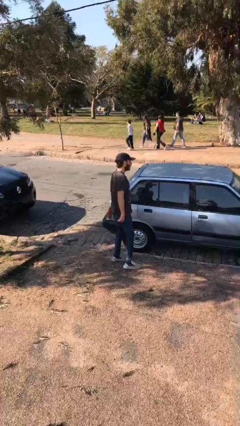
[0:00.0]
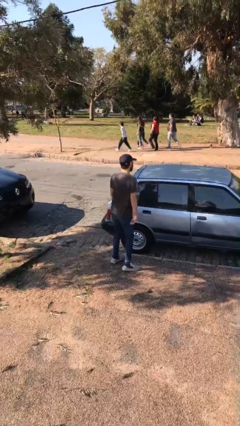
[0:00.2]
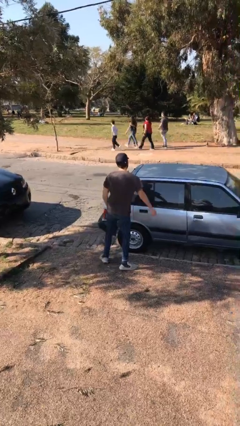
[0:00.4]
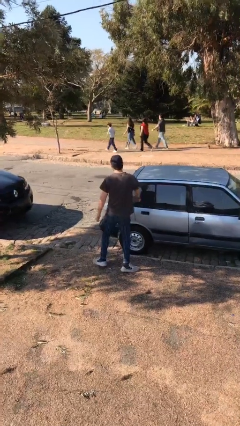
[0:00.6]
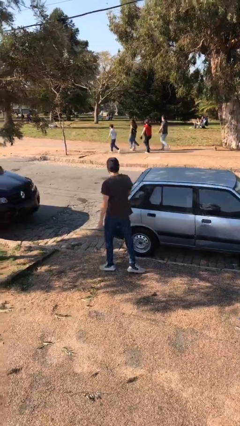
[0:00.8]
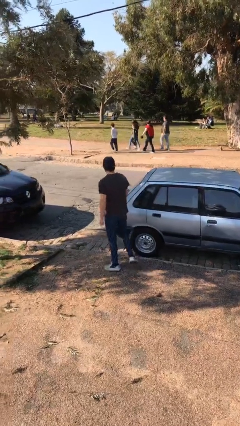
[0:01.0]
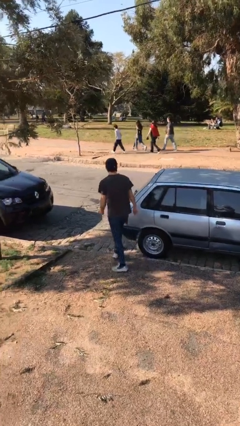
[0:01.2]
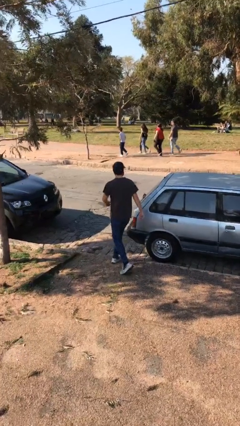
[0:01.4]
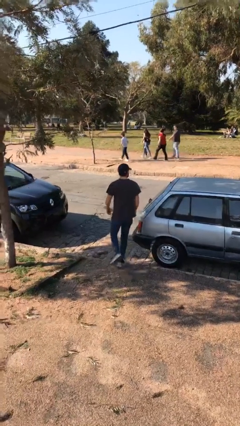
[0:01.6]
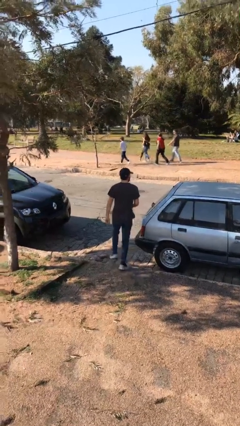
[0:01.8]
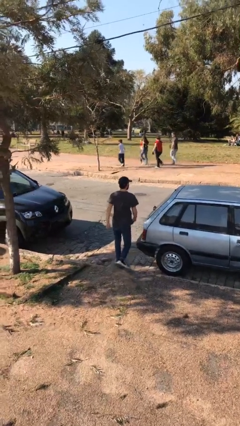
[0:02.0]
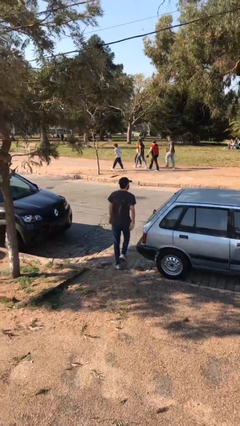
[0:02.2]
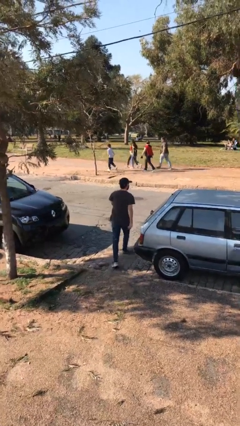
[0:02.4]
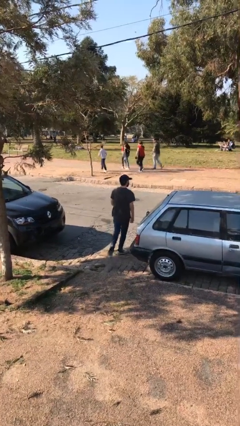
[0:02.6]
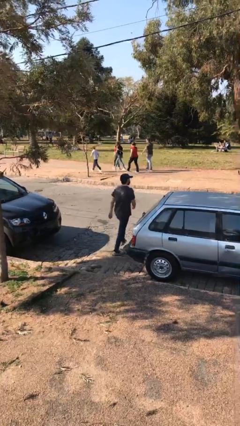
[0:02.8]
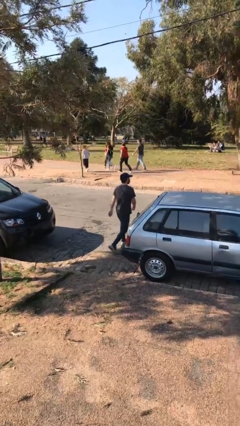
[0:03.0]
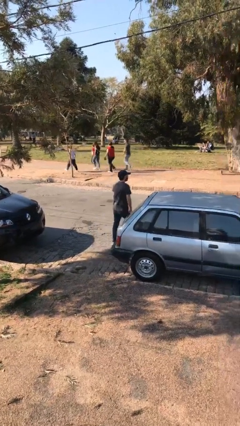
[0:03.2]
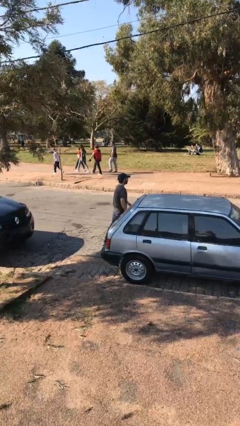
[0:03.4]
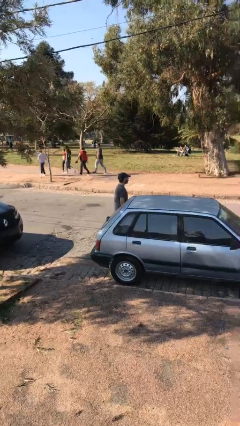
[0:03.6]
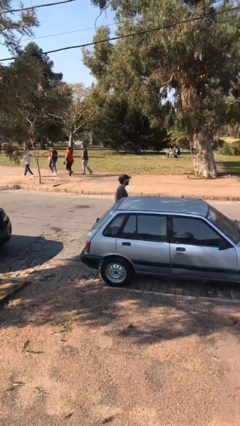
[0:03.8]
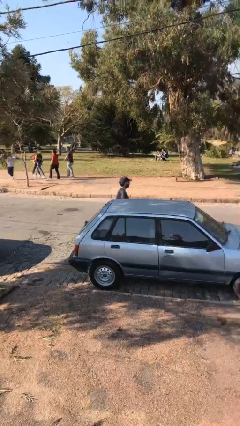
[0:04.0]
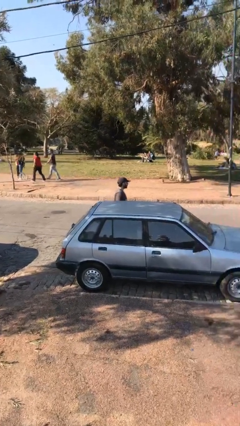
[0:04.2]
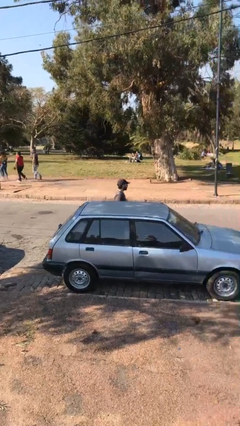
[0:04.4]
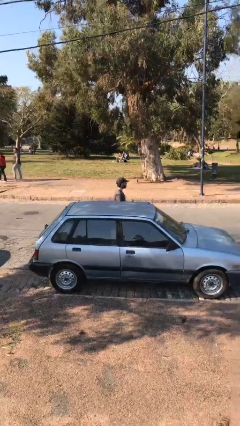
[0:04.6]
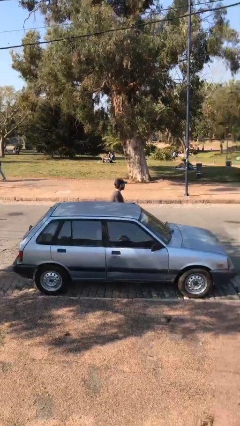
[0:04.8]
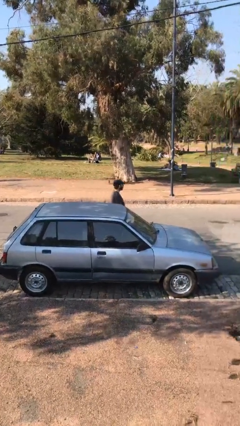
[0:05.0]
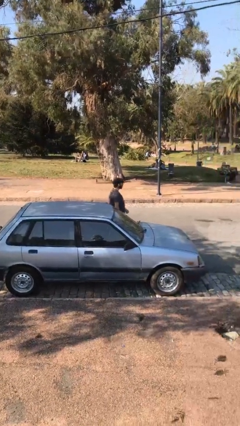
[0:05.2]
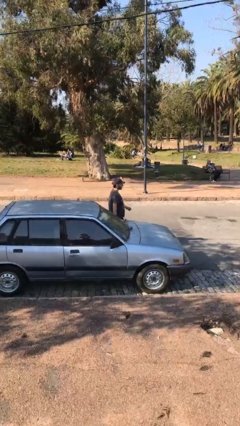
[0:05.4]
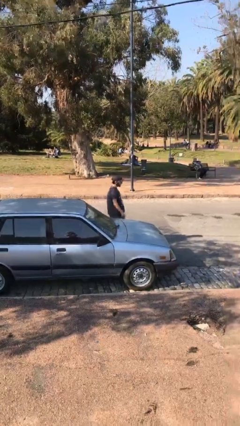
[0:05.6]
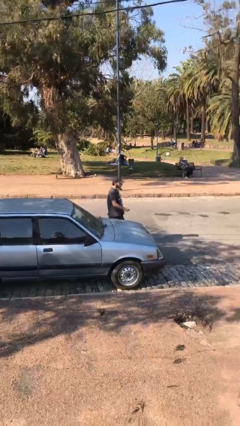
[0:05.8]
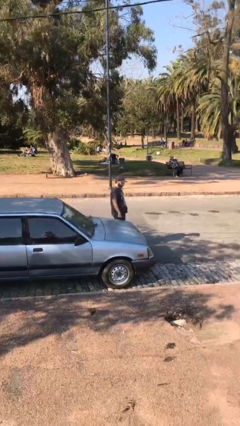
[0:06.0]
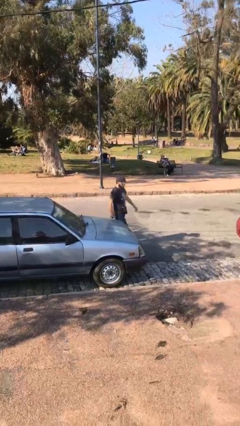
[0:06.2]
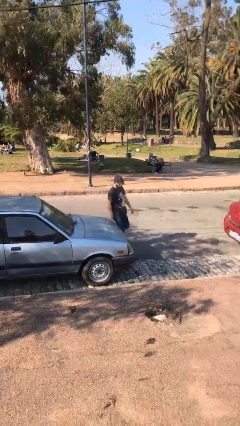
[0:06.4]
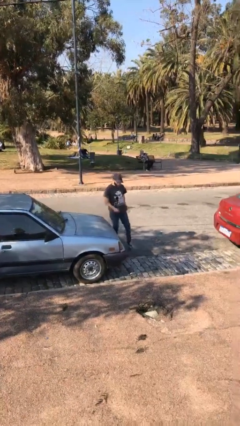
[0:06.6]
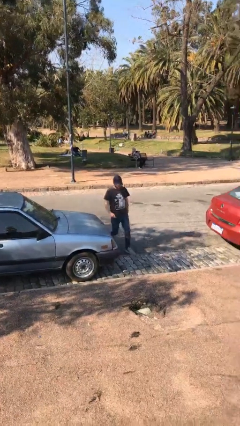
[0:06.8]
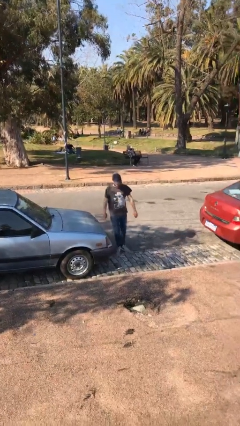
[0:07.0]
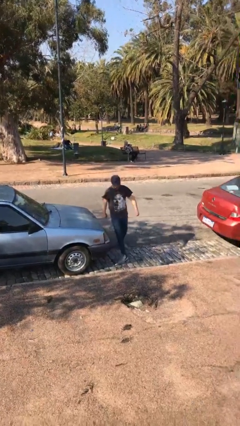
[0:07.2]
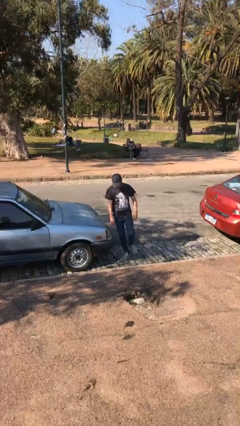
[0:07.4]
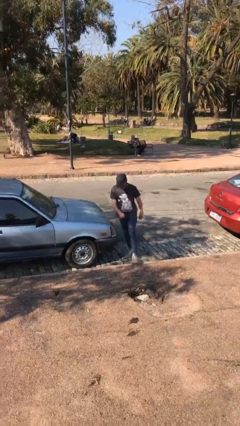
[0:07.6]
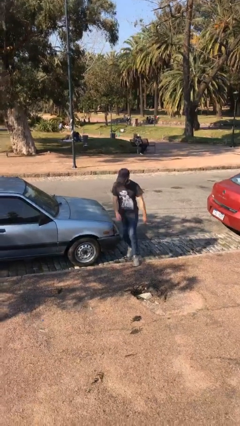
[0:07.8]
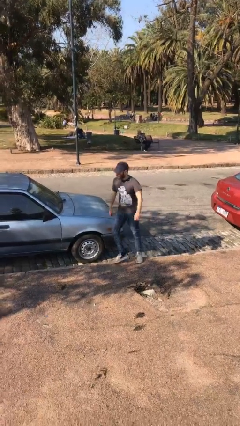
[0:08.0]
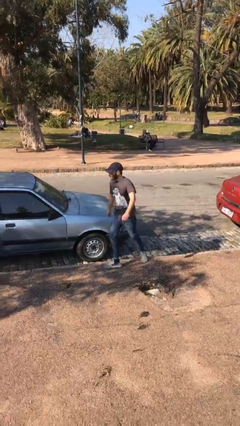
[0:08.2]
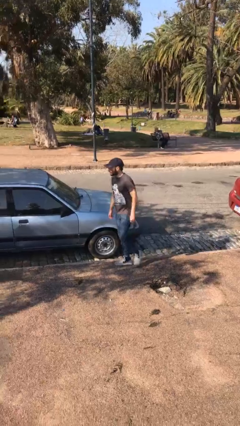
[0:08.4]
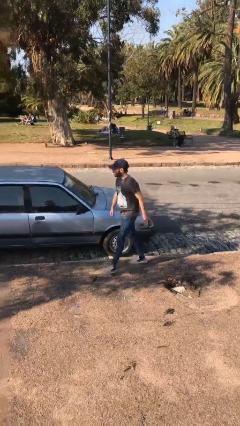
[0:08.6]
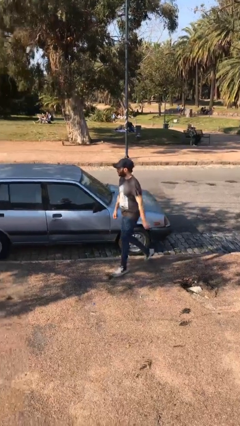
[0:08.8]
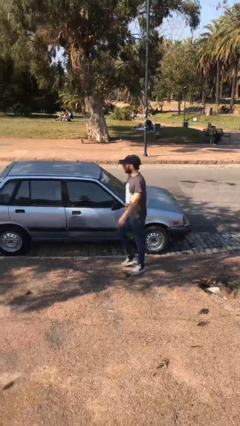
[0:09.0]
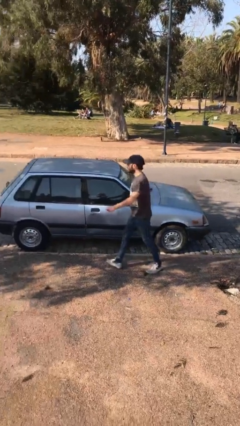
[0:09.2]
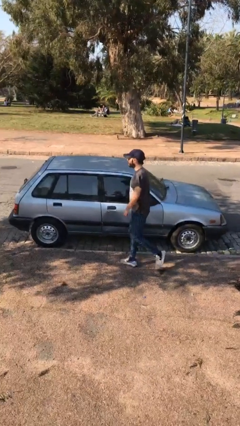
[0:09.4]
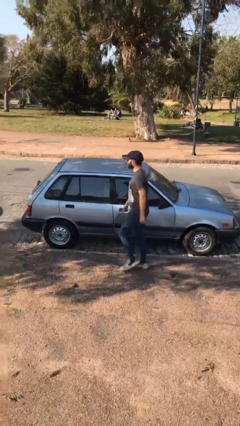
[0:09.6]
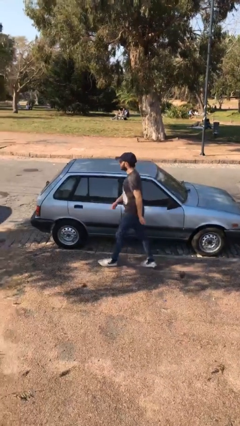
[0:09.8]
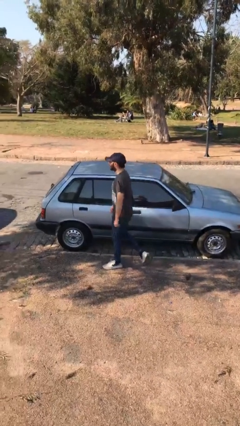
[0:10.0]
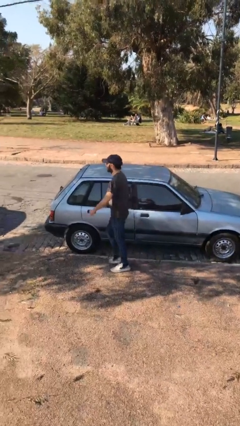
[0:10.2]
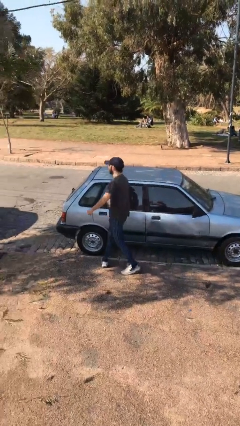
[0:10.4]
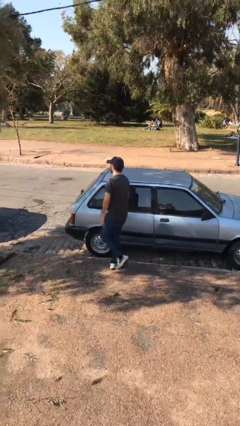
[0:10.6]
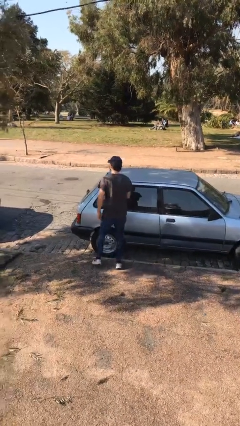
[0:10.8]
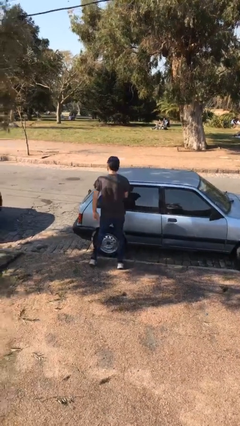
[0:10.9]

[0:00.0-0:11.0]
person walks around car

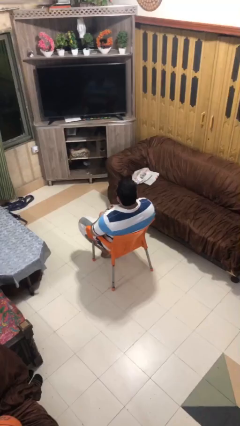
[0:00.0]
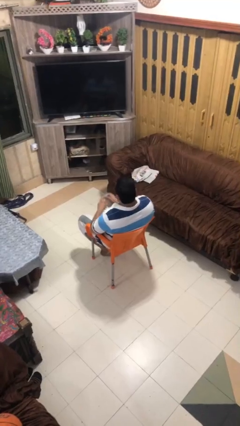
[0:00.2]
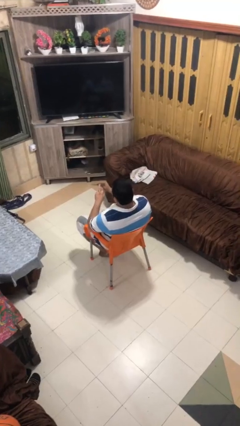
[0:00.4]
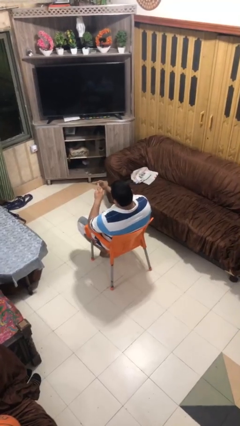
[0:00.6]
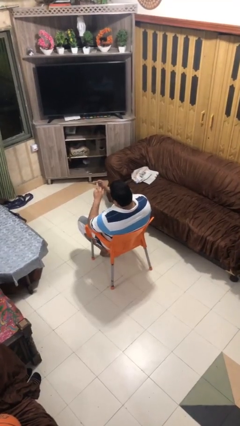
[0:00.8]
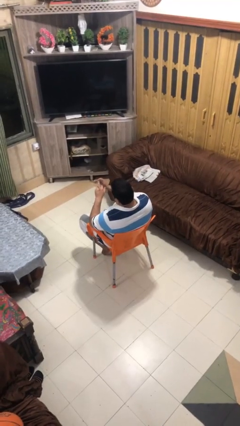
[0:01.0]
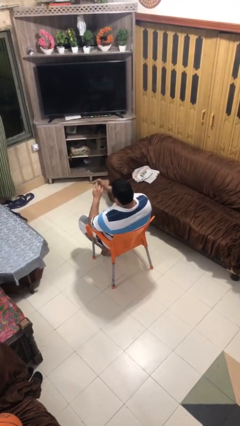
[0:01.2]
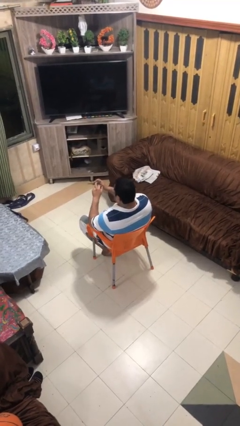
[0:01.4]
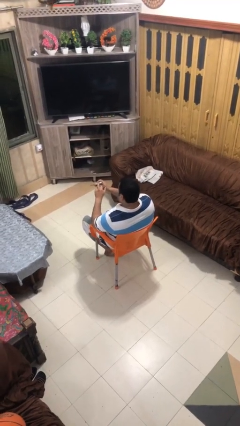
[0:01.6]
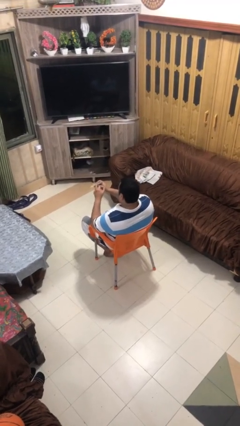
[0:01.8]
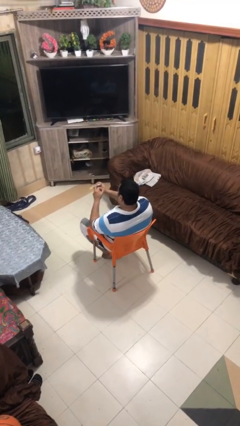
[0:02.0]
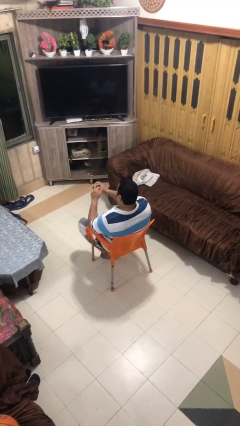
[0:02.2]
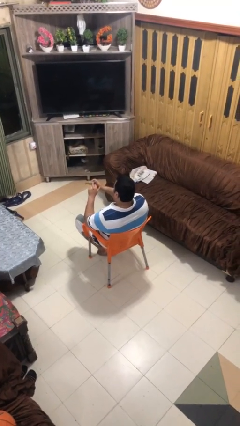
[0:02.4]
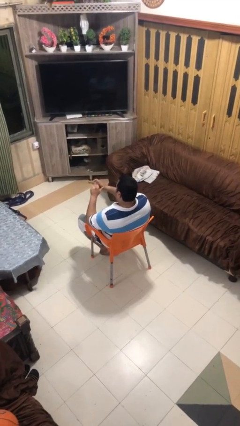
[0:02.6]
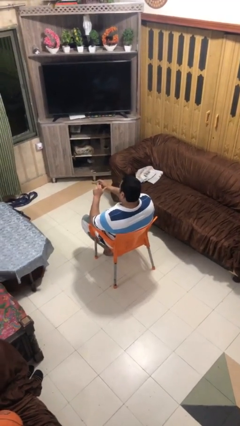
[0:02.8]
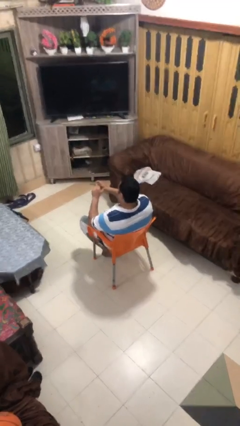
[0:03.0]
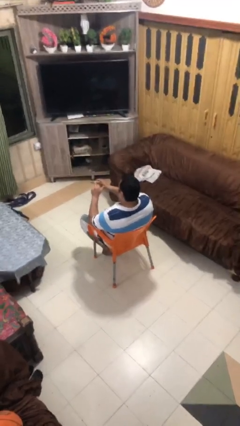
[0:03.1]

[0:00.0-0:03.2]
person files fingernails

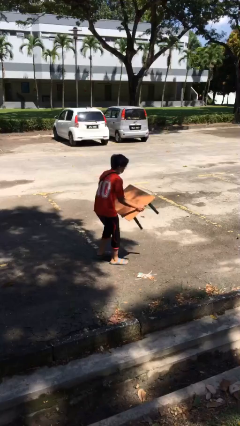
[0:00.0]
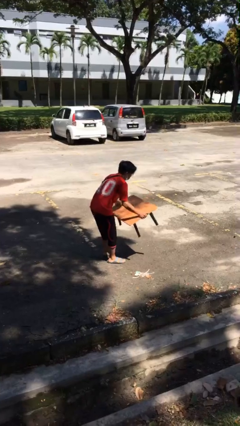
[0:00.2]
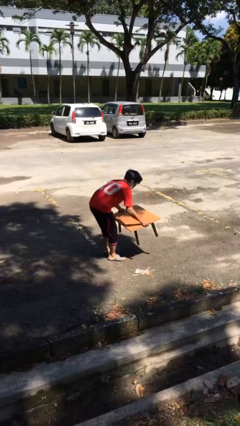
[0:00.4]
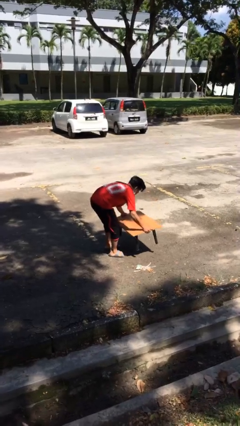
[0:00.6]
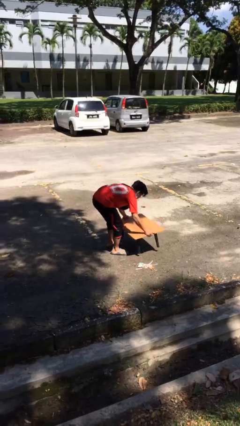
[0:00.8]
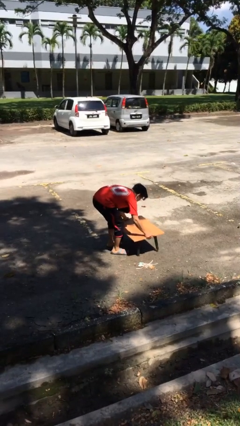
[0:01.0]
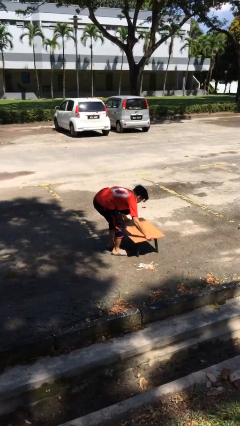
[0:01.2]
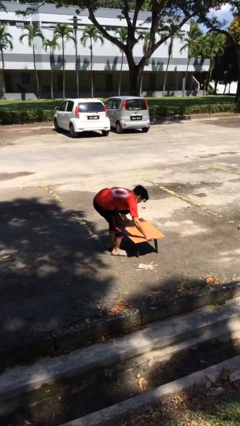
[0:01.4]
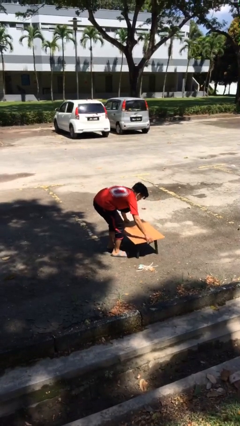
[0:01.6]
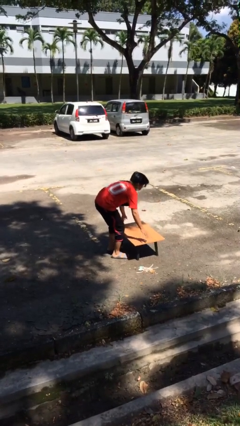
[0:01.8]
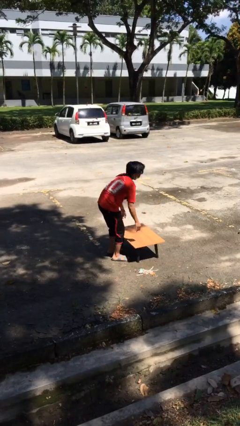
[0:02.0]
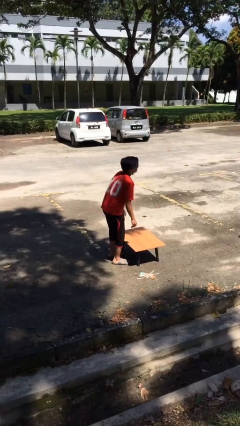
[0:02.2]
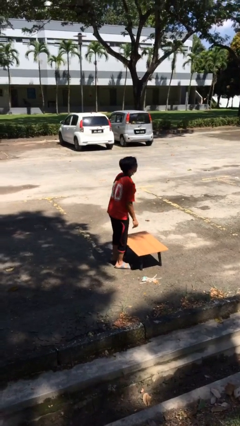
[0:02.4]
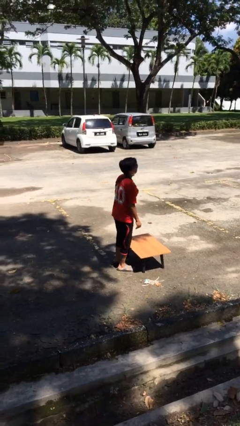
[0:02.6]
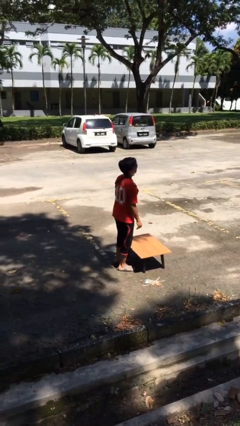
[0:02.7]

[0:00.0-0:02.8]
person puts down object on floor

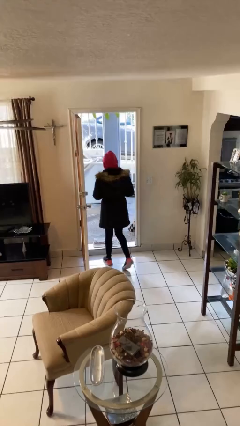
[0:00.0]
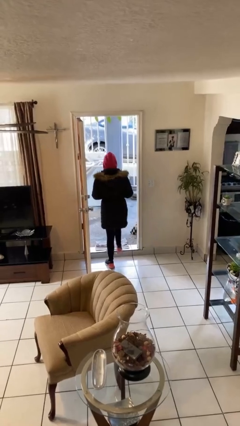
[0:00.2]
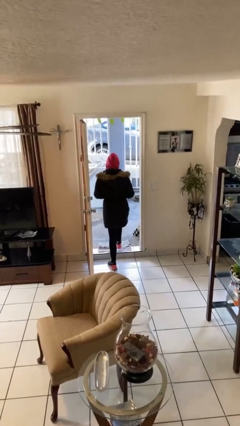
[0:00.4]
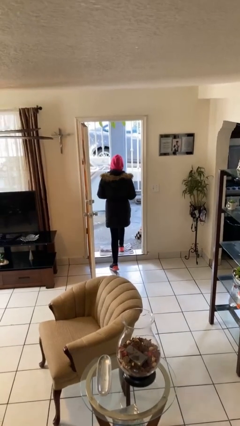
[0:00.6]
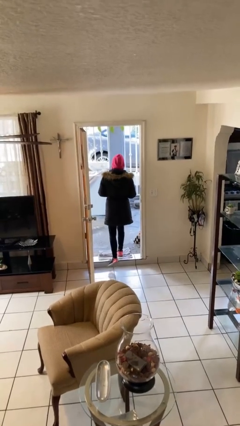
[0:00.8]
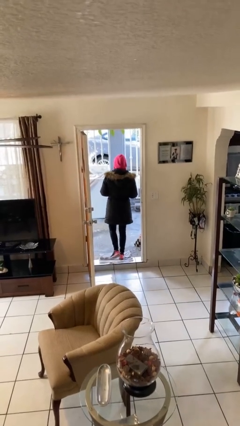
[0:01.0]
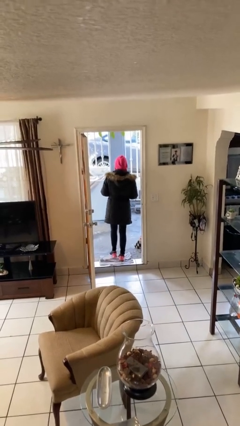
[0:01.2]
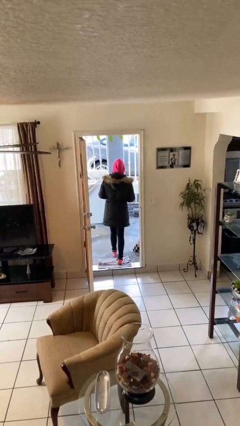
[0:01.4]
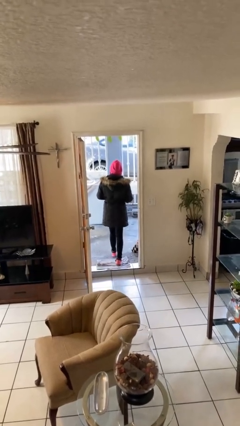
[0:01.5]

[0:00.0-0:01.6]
person exits scene through structure
